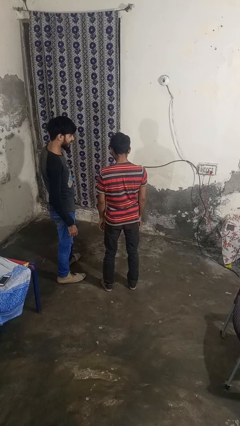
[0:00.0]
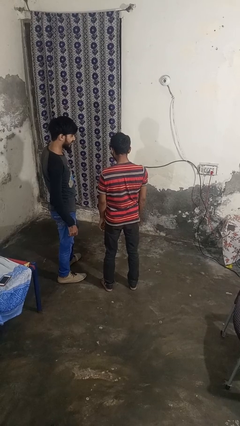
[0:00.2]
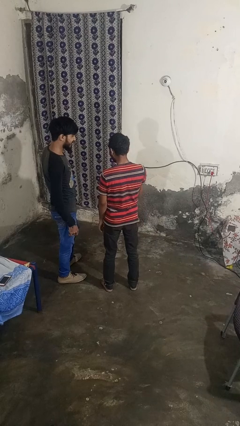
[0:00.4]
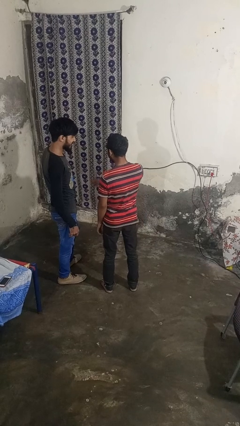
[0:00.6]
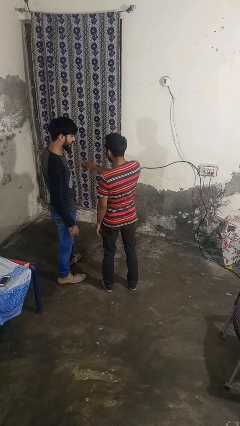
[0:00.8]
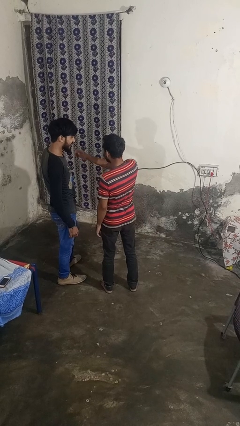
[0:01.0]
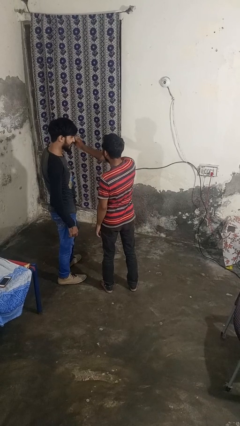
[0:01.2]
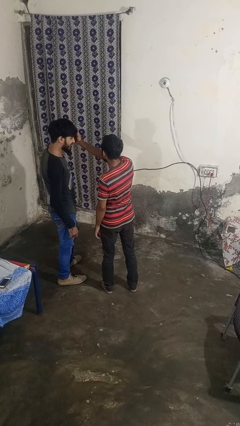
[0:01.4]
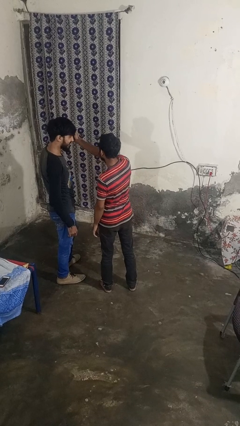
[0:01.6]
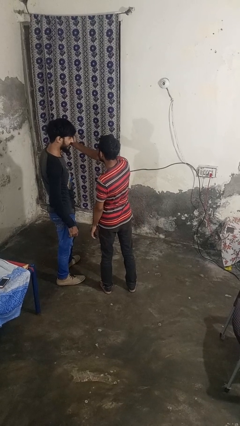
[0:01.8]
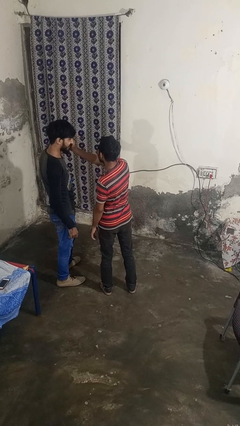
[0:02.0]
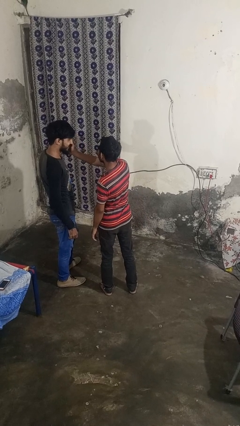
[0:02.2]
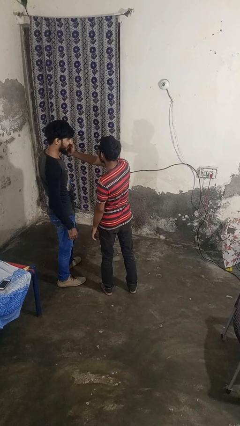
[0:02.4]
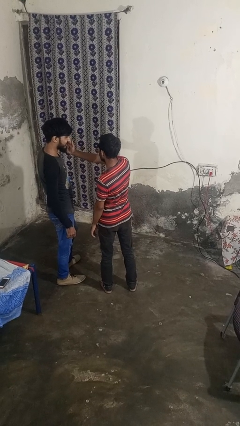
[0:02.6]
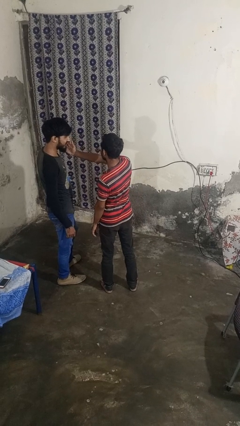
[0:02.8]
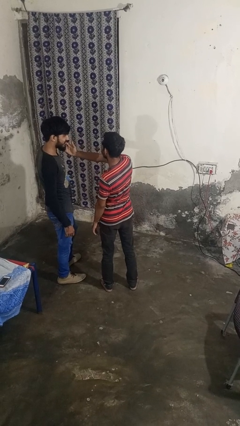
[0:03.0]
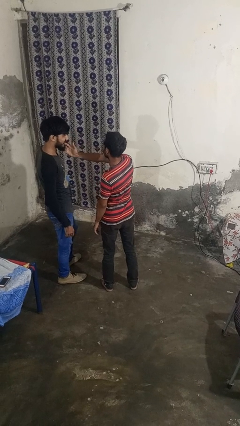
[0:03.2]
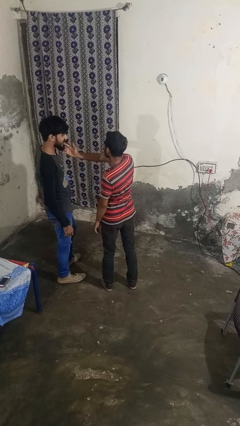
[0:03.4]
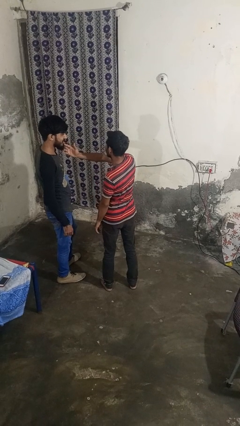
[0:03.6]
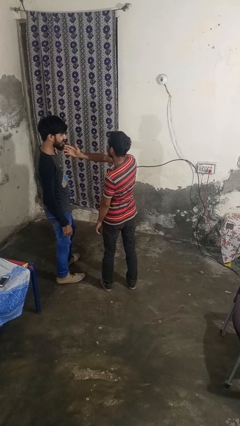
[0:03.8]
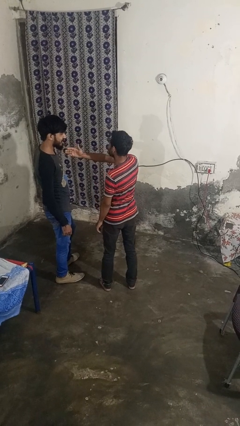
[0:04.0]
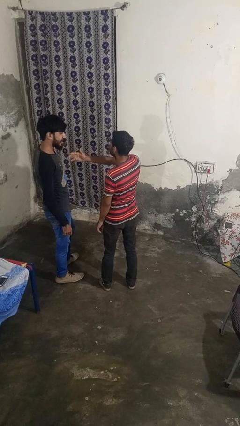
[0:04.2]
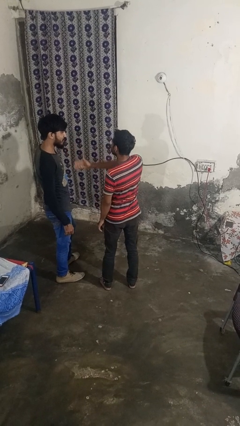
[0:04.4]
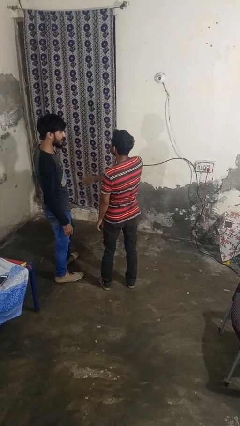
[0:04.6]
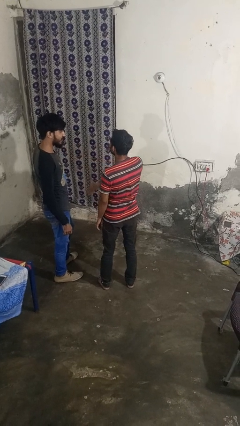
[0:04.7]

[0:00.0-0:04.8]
person touches face of person

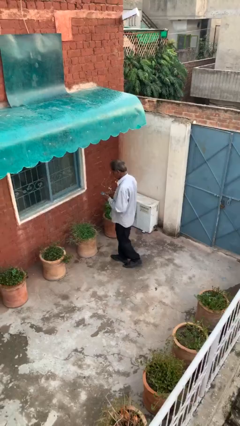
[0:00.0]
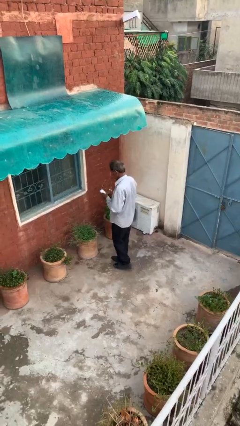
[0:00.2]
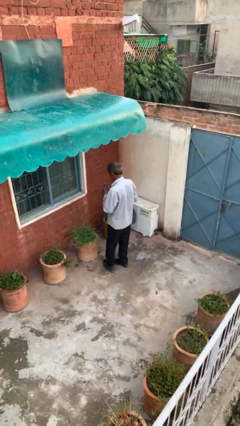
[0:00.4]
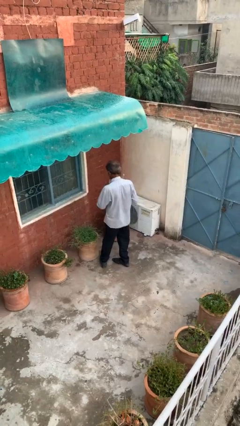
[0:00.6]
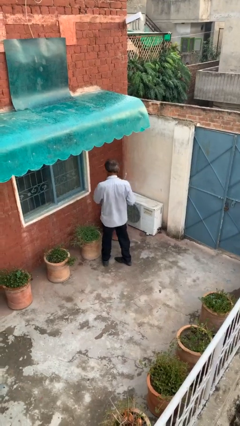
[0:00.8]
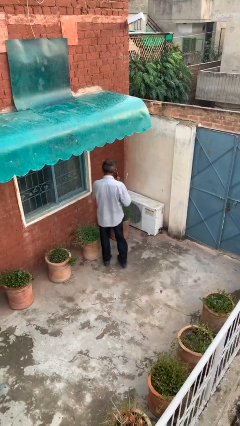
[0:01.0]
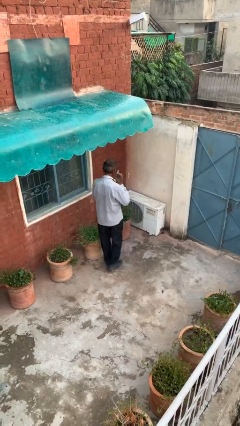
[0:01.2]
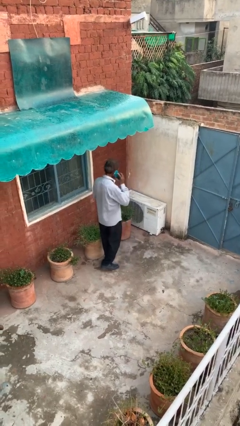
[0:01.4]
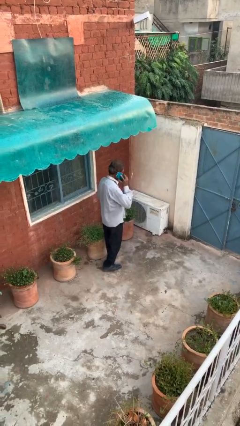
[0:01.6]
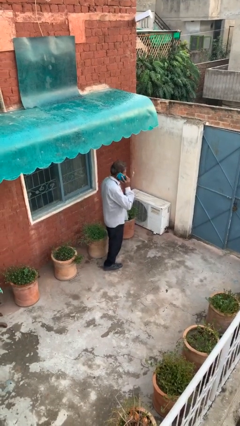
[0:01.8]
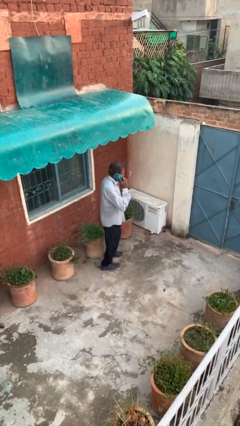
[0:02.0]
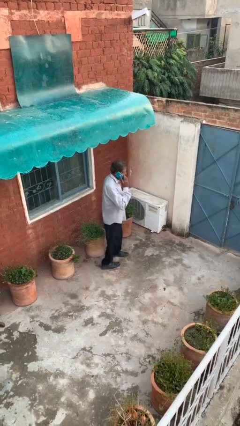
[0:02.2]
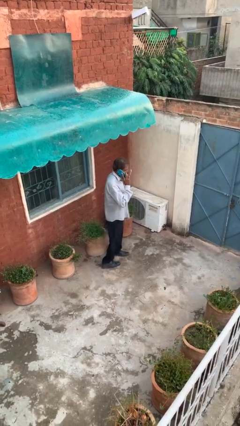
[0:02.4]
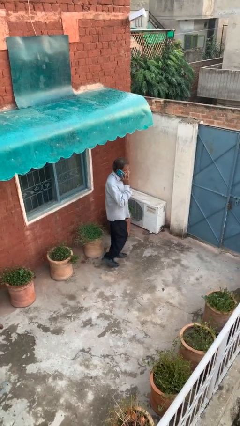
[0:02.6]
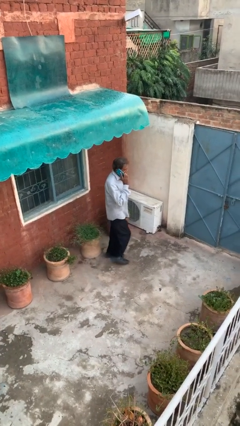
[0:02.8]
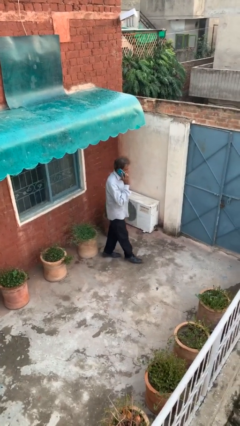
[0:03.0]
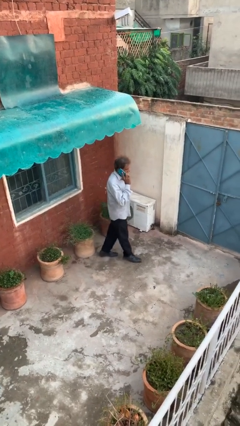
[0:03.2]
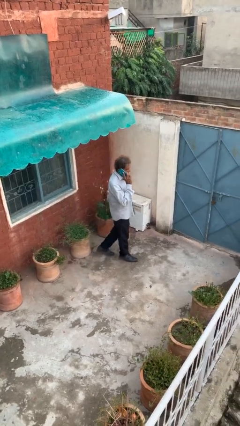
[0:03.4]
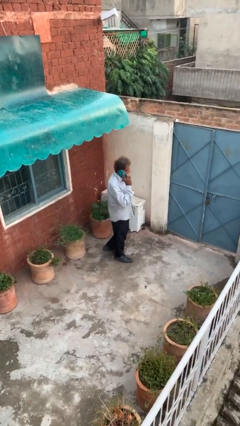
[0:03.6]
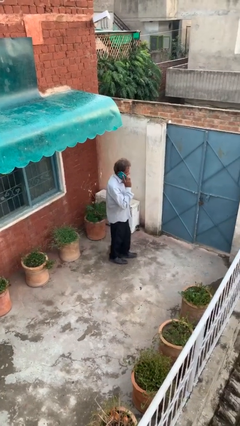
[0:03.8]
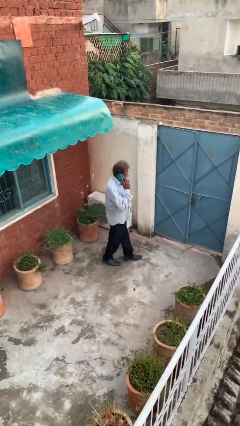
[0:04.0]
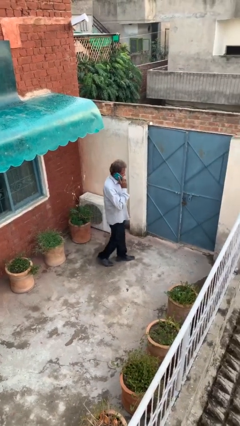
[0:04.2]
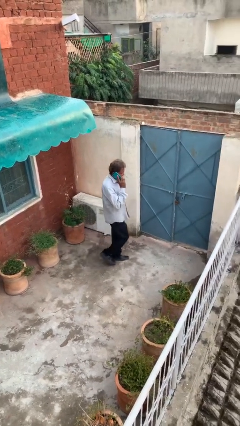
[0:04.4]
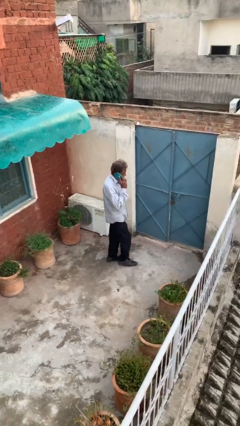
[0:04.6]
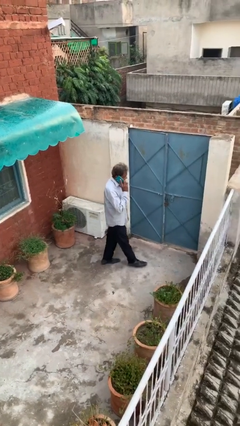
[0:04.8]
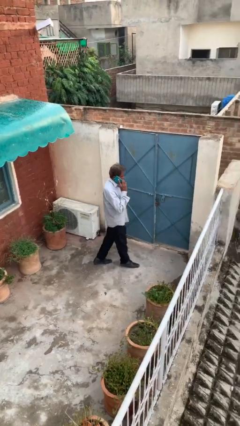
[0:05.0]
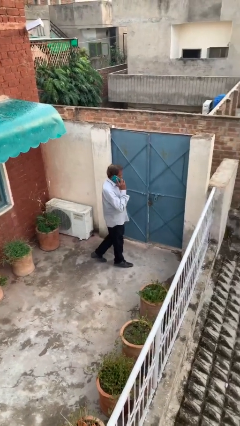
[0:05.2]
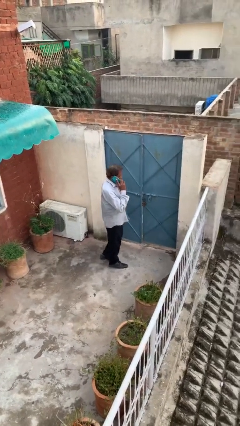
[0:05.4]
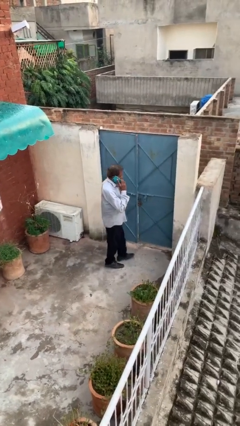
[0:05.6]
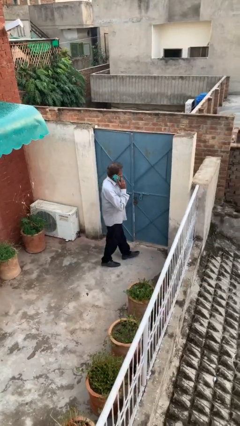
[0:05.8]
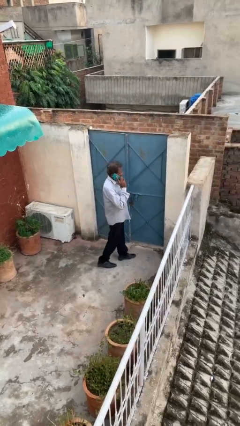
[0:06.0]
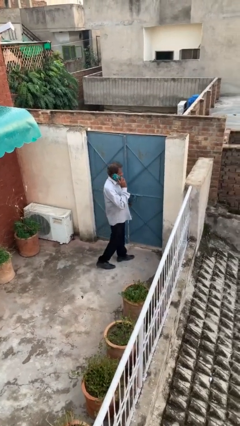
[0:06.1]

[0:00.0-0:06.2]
person talks on phone

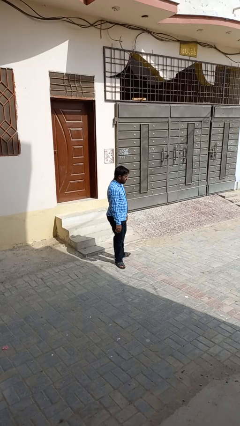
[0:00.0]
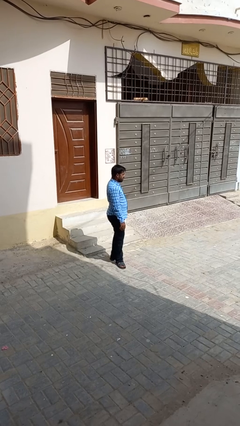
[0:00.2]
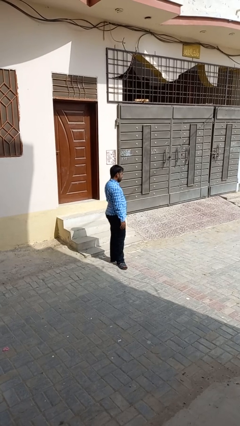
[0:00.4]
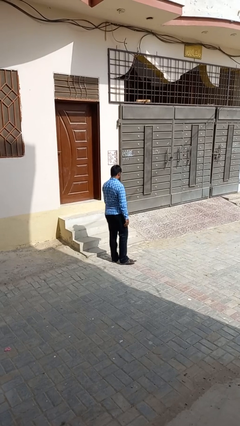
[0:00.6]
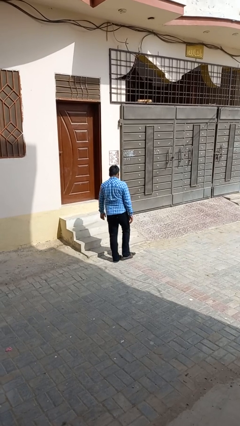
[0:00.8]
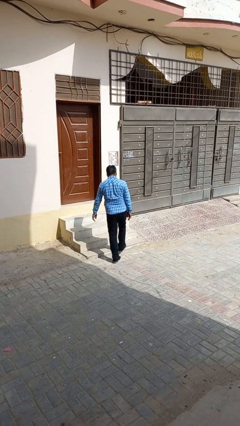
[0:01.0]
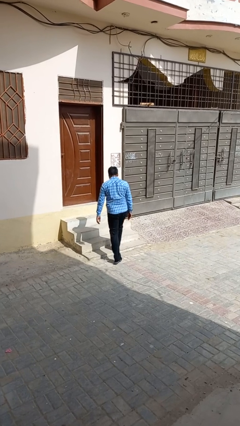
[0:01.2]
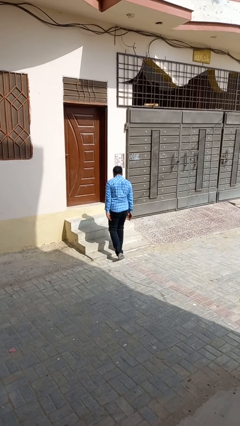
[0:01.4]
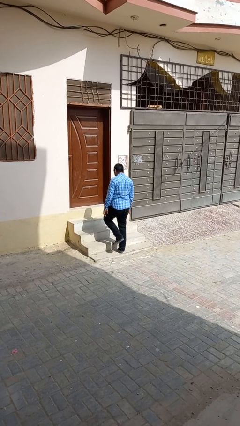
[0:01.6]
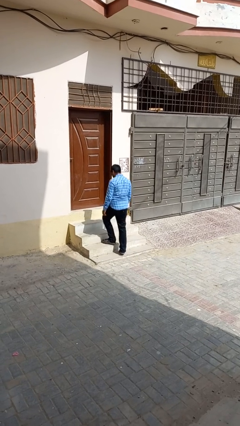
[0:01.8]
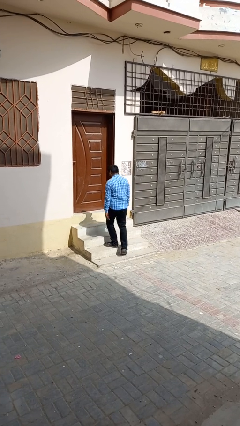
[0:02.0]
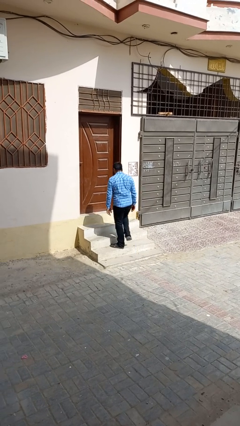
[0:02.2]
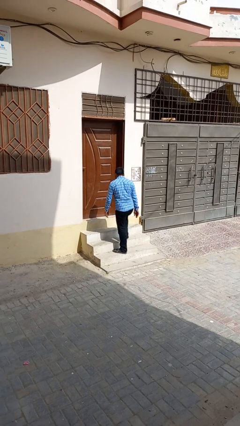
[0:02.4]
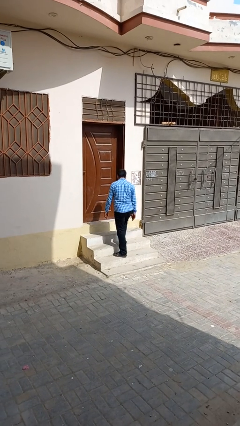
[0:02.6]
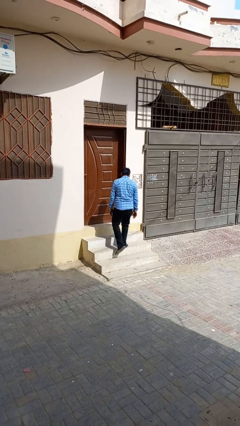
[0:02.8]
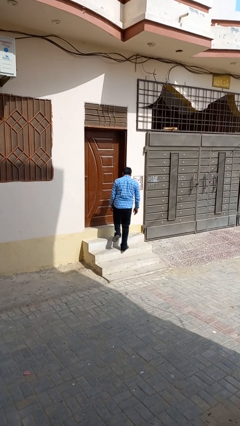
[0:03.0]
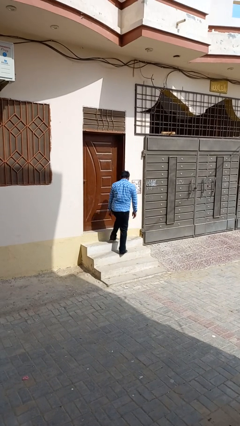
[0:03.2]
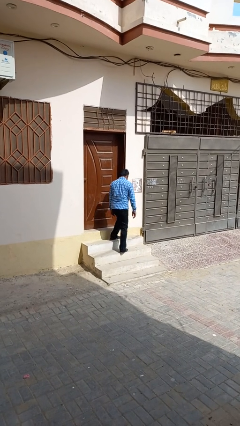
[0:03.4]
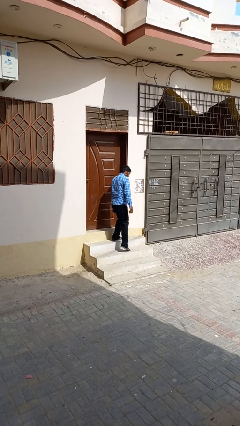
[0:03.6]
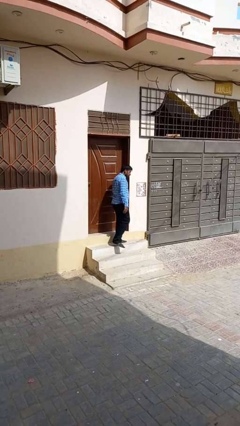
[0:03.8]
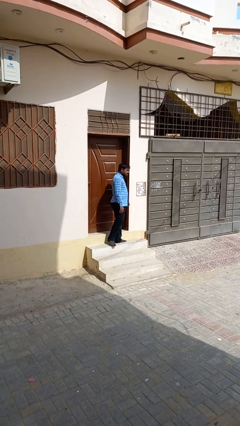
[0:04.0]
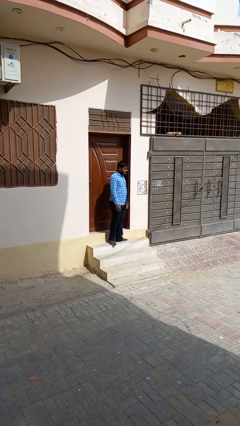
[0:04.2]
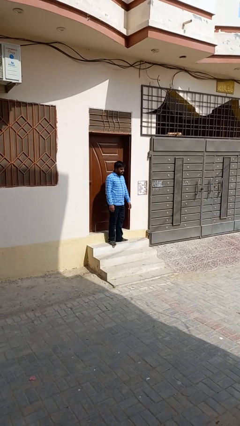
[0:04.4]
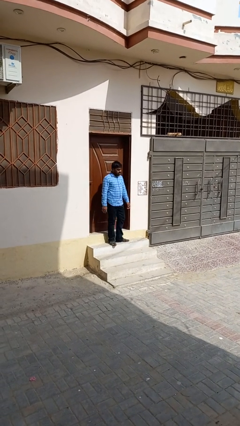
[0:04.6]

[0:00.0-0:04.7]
person climbs up stairs

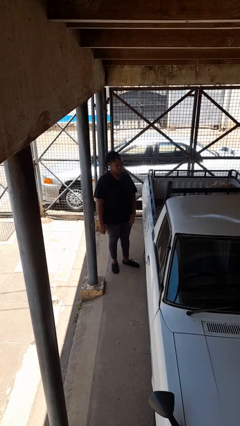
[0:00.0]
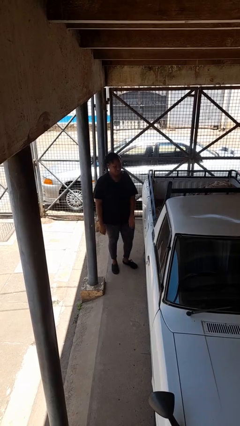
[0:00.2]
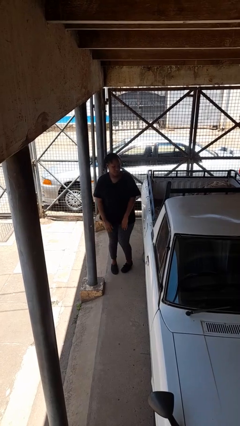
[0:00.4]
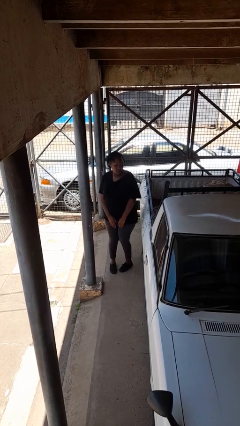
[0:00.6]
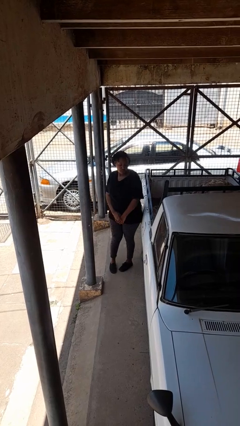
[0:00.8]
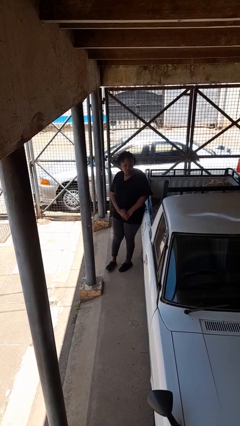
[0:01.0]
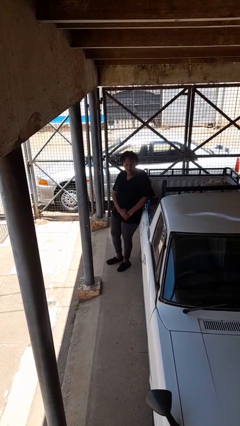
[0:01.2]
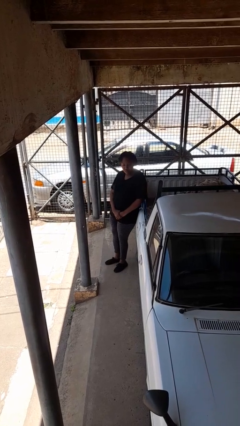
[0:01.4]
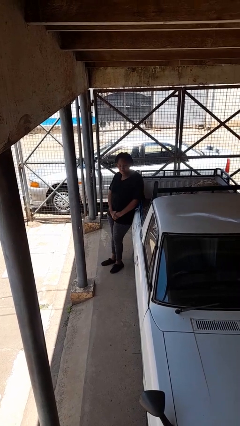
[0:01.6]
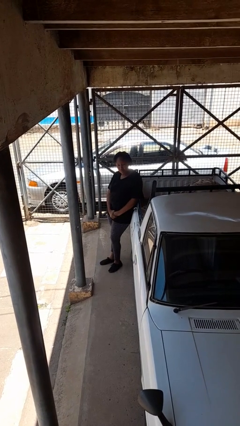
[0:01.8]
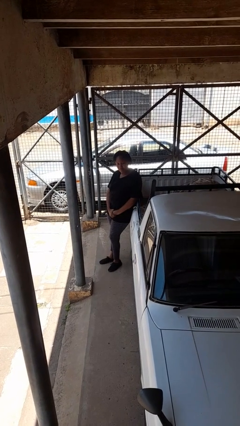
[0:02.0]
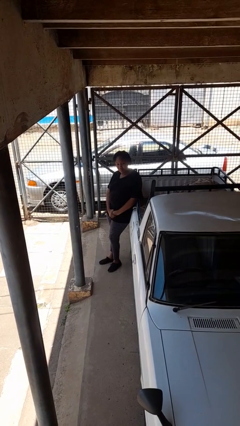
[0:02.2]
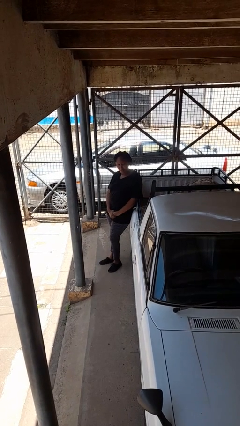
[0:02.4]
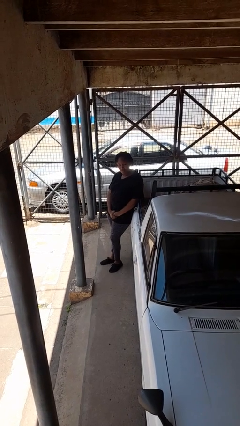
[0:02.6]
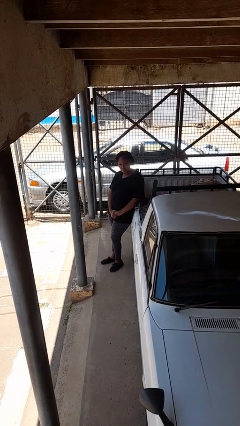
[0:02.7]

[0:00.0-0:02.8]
person leans against car
